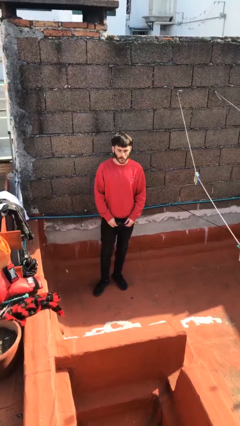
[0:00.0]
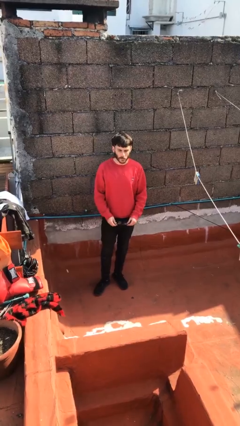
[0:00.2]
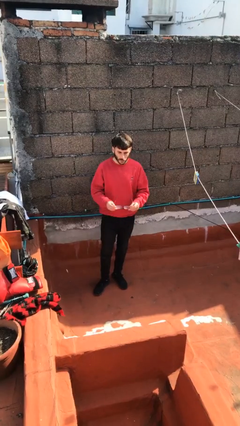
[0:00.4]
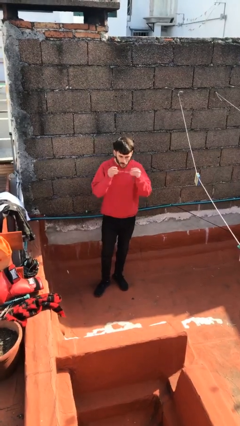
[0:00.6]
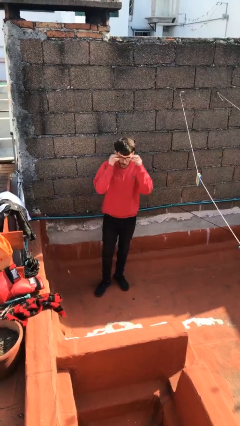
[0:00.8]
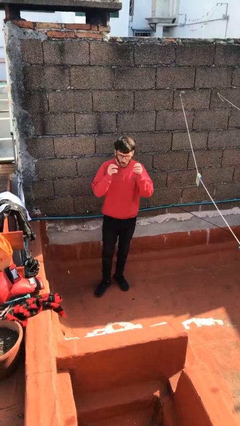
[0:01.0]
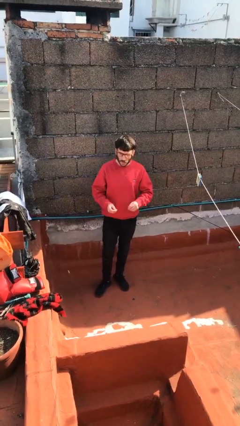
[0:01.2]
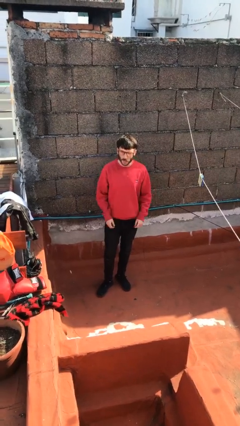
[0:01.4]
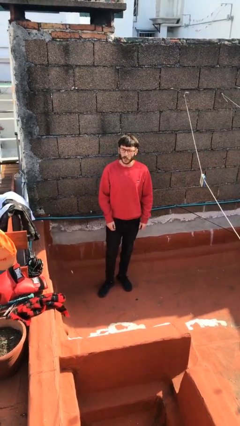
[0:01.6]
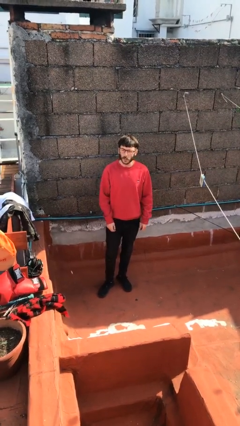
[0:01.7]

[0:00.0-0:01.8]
person puts on glasses

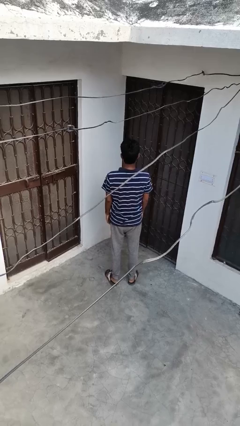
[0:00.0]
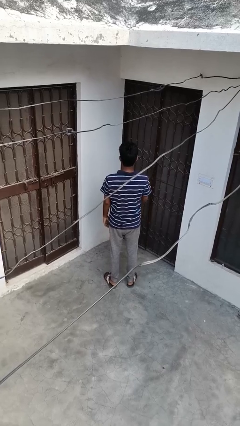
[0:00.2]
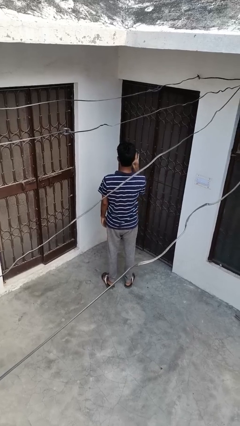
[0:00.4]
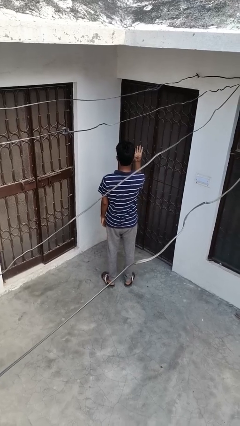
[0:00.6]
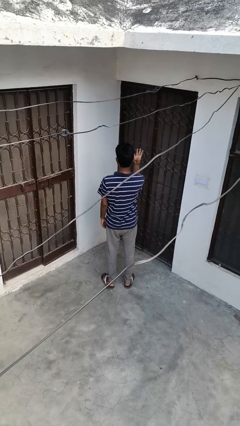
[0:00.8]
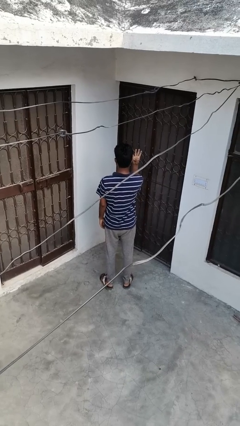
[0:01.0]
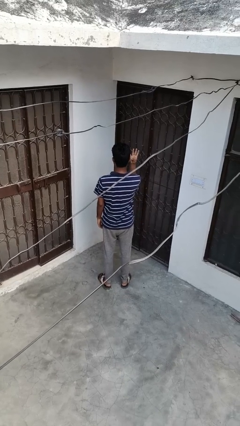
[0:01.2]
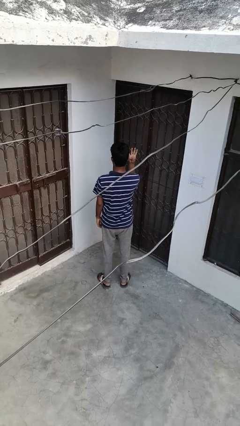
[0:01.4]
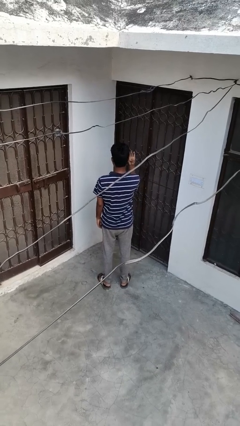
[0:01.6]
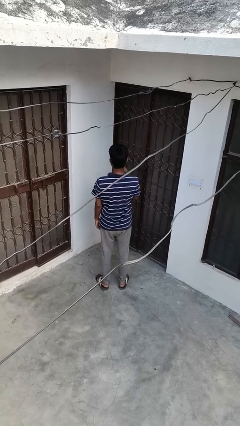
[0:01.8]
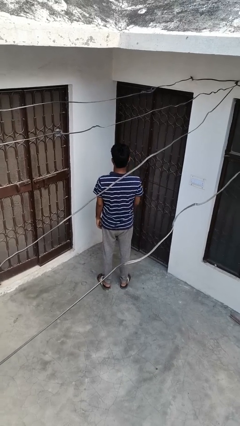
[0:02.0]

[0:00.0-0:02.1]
person gestures number four

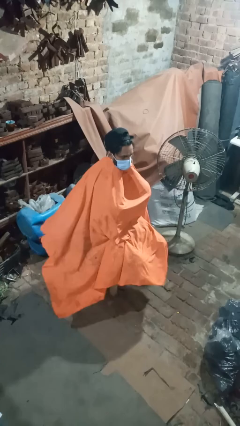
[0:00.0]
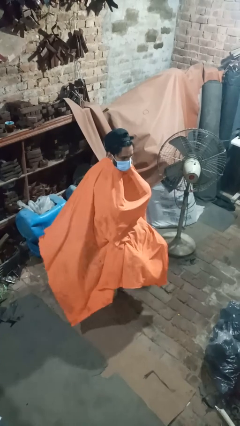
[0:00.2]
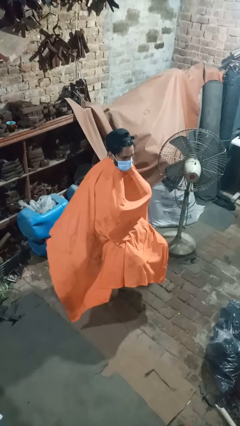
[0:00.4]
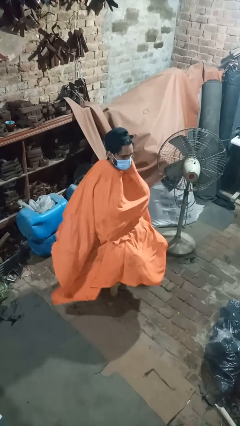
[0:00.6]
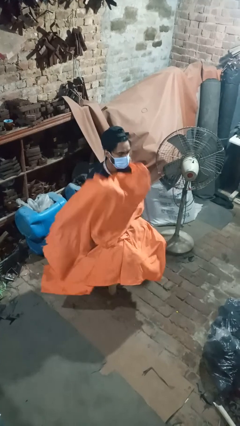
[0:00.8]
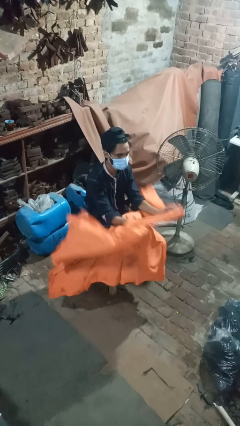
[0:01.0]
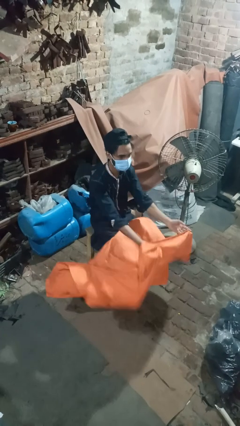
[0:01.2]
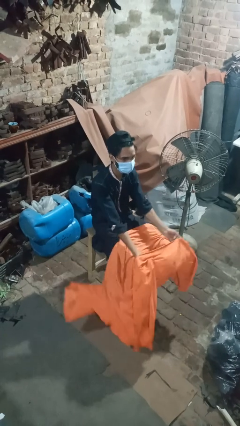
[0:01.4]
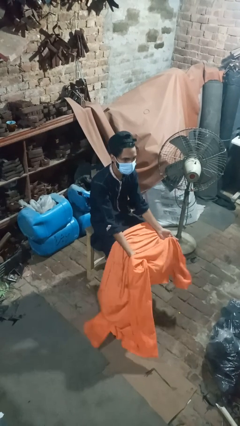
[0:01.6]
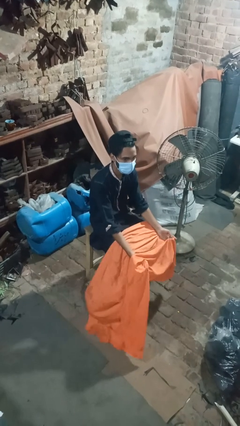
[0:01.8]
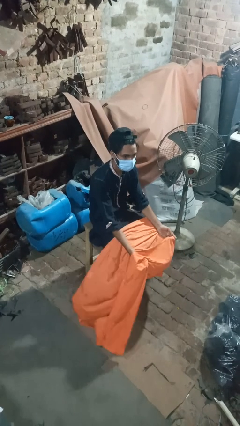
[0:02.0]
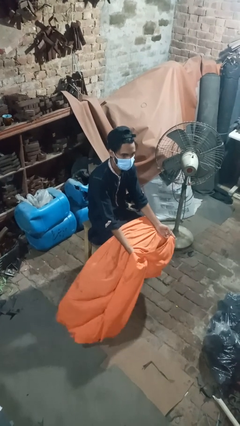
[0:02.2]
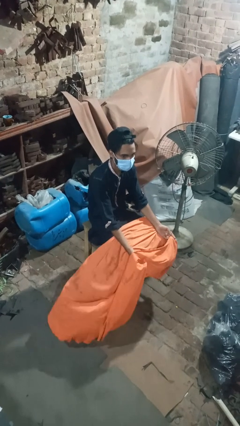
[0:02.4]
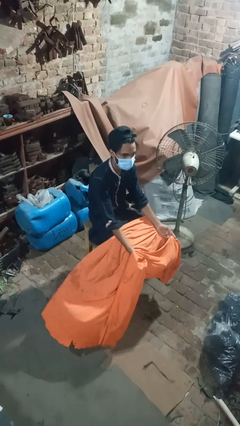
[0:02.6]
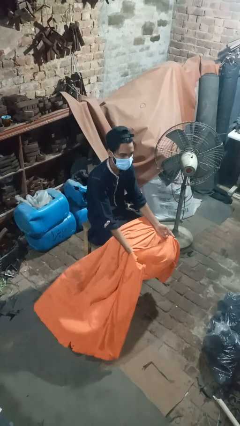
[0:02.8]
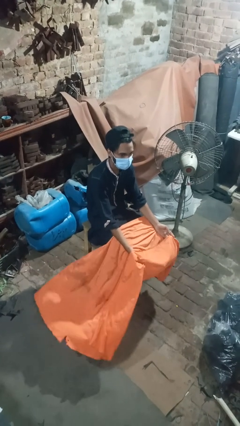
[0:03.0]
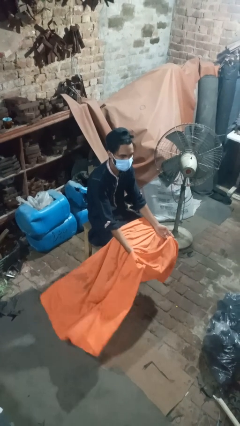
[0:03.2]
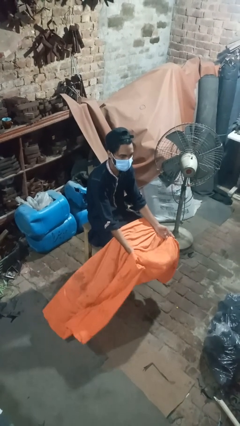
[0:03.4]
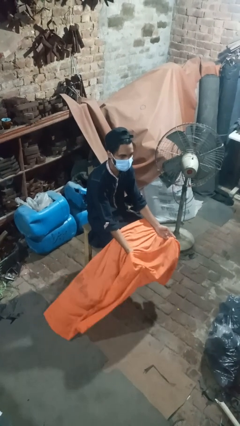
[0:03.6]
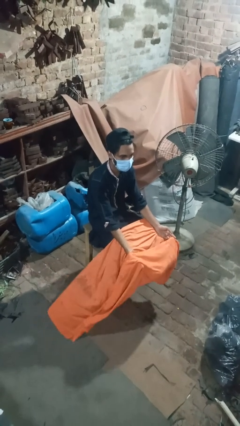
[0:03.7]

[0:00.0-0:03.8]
person uncovers with blanket

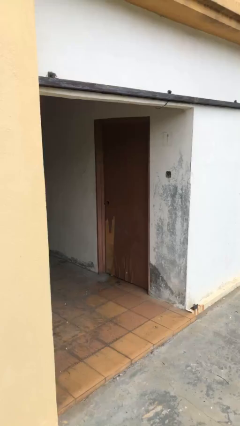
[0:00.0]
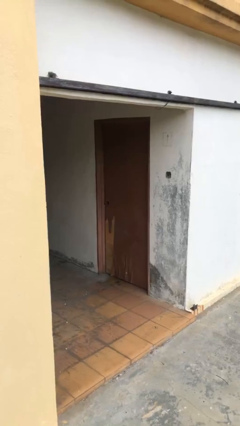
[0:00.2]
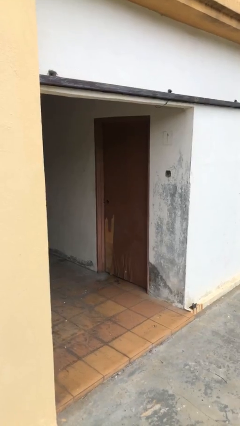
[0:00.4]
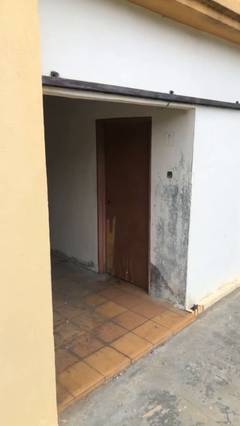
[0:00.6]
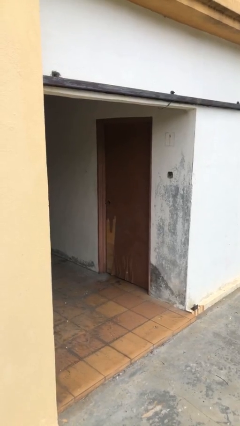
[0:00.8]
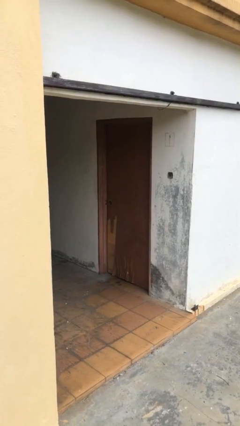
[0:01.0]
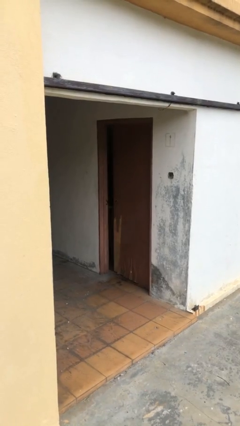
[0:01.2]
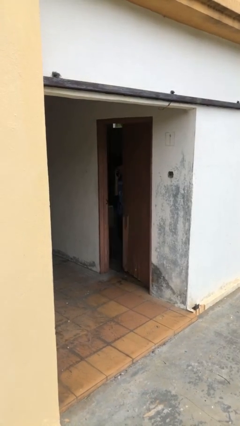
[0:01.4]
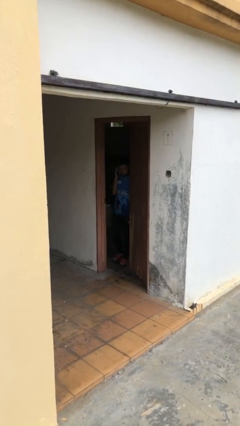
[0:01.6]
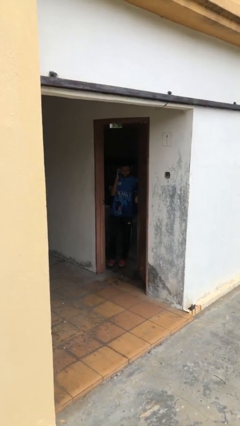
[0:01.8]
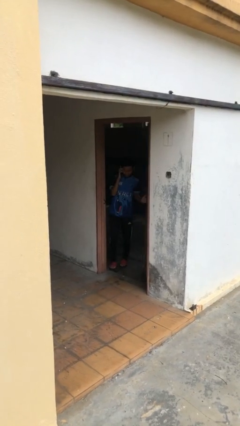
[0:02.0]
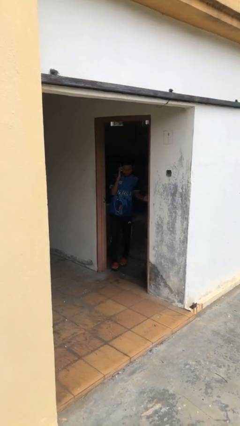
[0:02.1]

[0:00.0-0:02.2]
person opens facility door

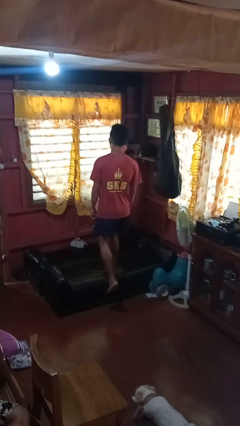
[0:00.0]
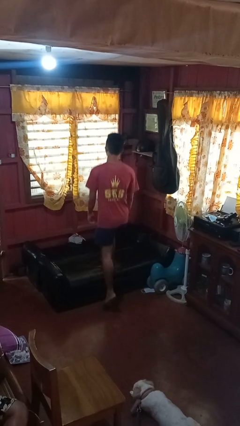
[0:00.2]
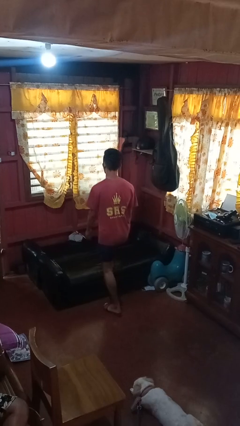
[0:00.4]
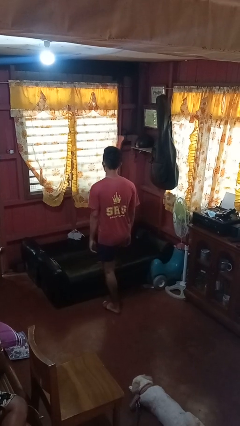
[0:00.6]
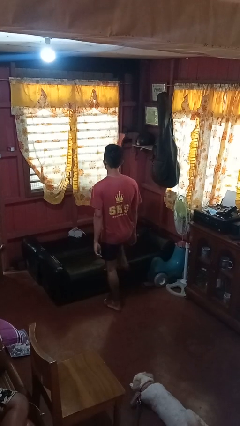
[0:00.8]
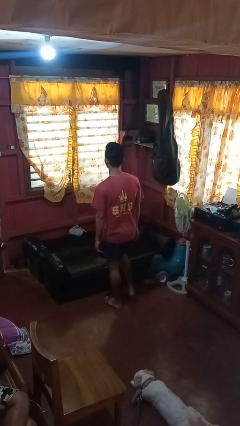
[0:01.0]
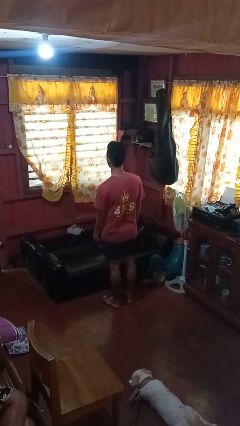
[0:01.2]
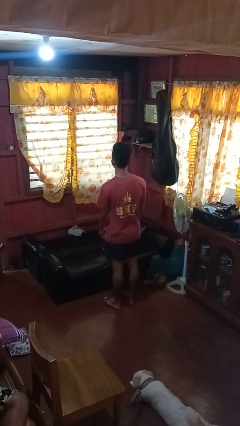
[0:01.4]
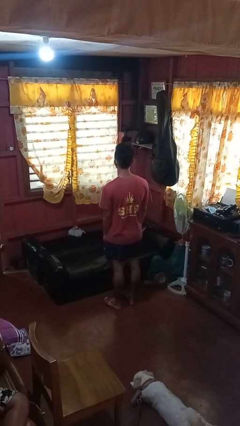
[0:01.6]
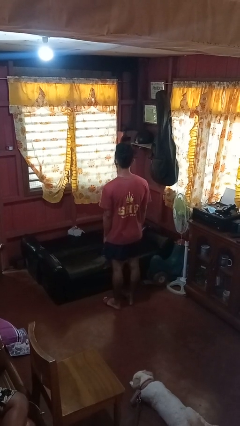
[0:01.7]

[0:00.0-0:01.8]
person climbs off couch

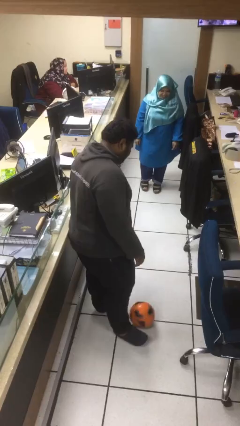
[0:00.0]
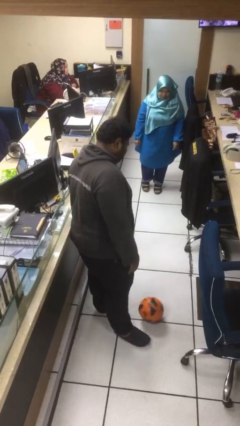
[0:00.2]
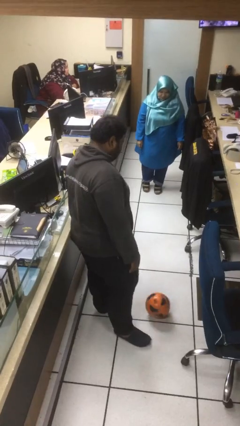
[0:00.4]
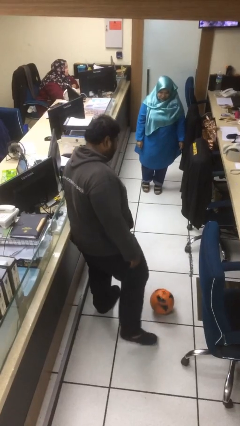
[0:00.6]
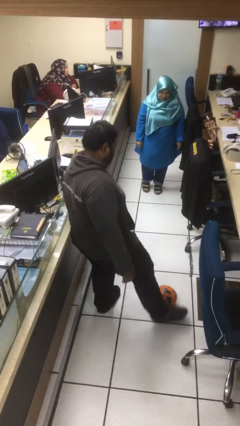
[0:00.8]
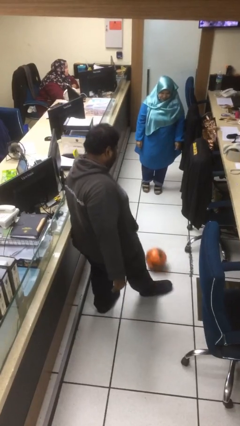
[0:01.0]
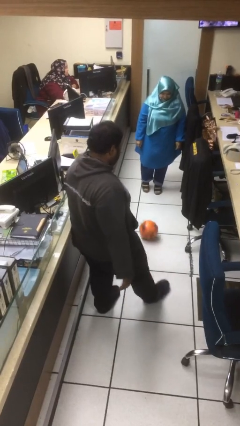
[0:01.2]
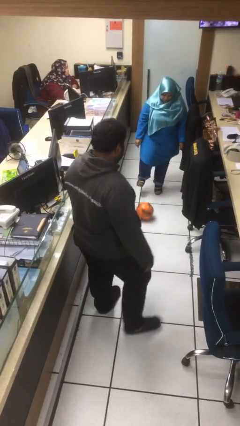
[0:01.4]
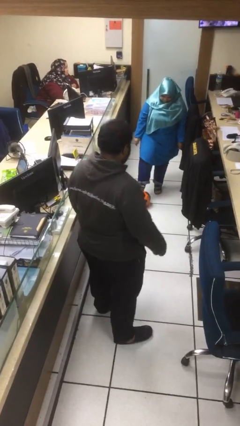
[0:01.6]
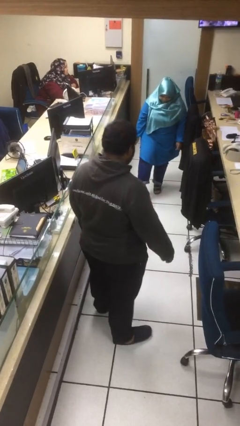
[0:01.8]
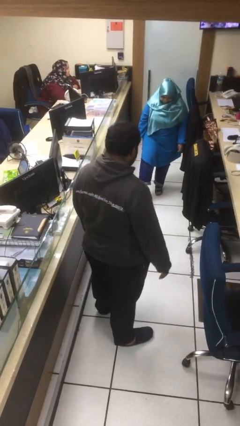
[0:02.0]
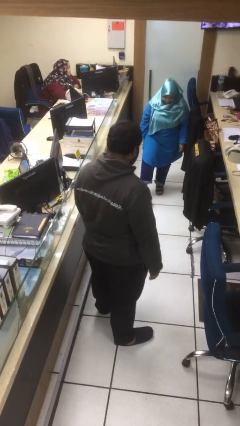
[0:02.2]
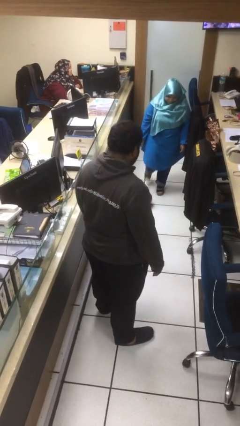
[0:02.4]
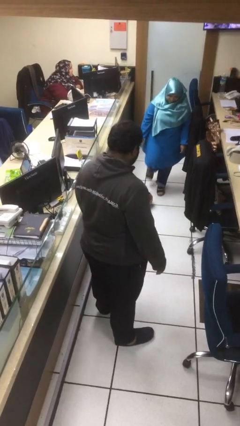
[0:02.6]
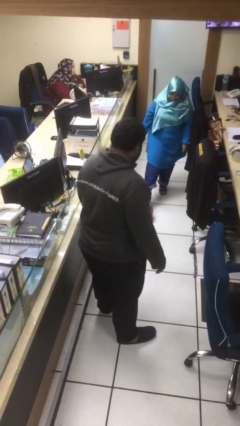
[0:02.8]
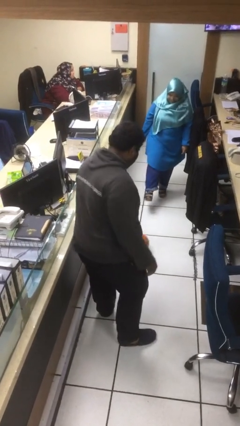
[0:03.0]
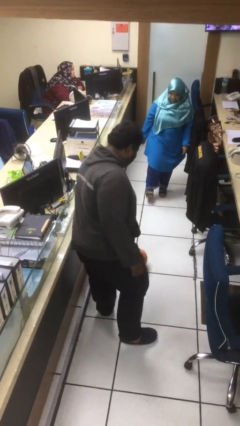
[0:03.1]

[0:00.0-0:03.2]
person kicks object to person

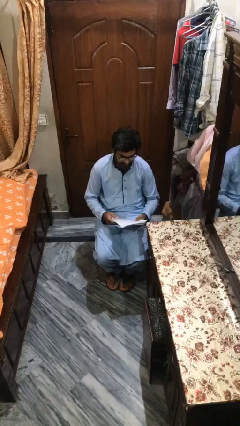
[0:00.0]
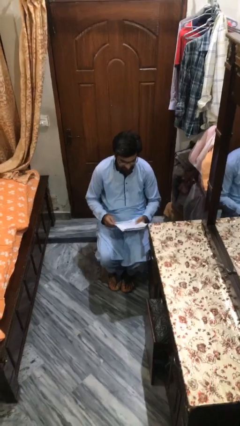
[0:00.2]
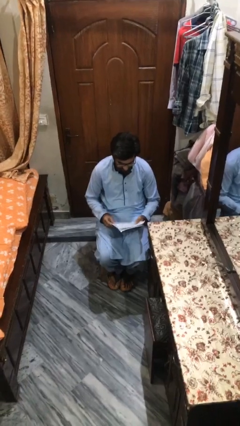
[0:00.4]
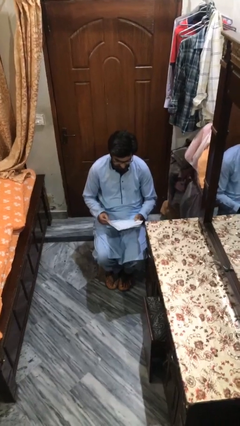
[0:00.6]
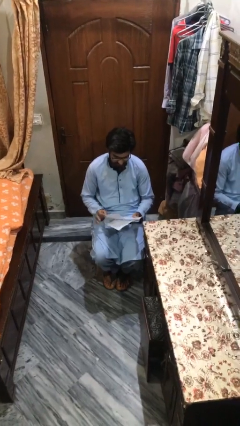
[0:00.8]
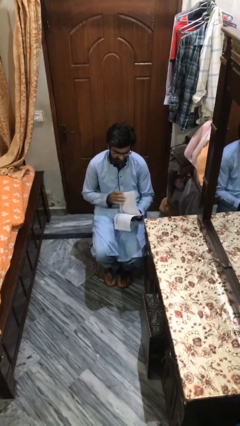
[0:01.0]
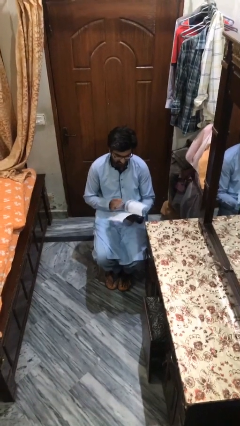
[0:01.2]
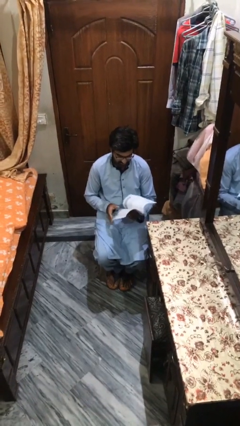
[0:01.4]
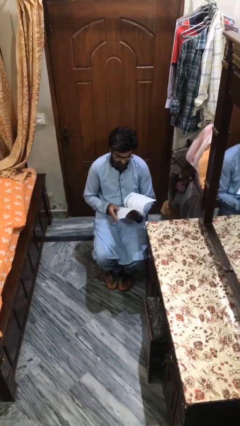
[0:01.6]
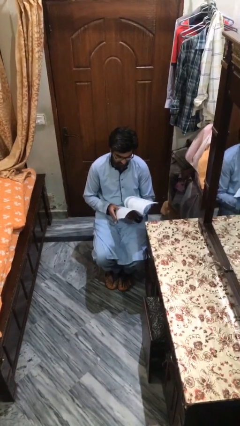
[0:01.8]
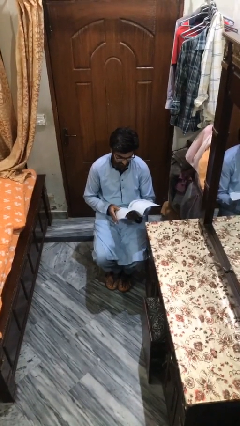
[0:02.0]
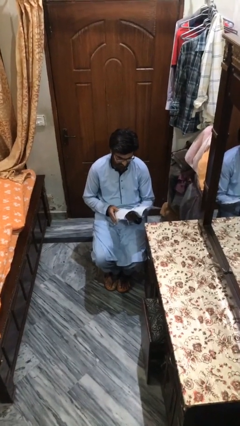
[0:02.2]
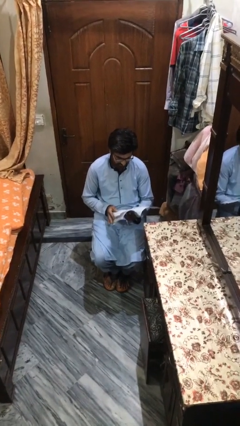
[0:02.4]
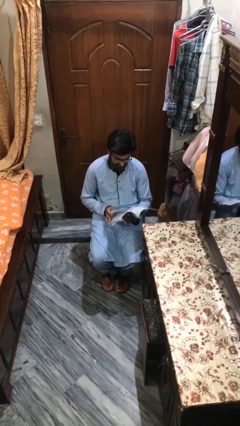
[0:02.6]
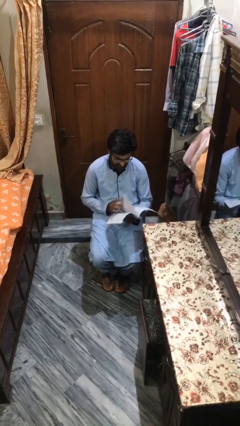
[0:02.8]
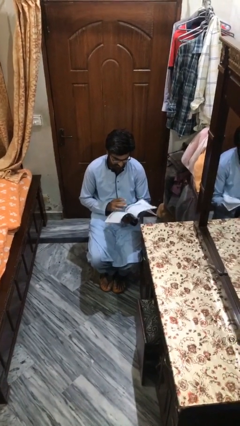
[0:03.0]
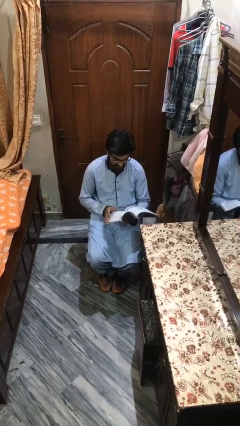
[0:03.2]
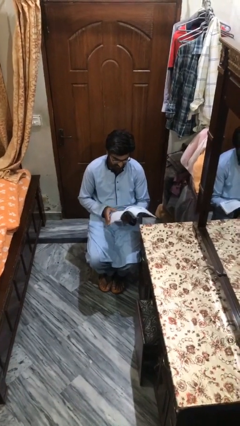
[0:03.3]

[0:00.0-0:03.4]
person reads document
